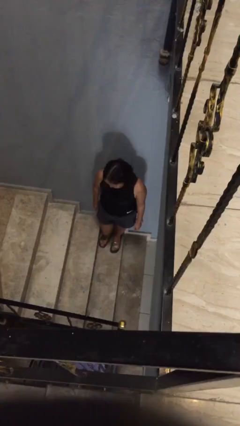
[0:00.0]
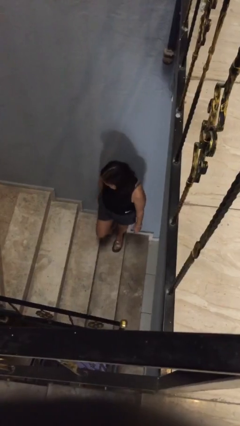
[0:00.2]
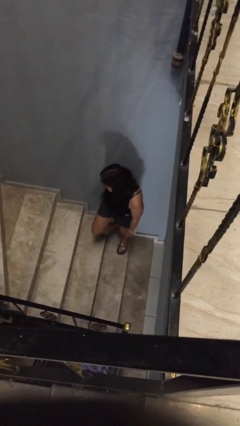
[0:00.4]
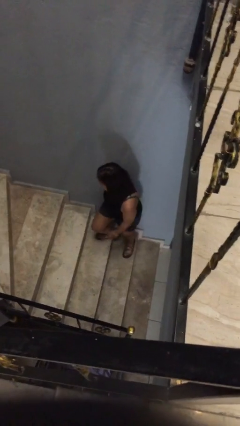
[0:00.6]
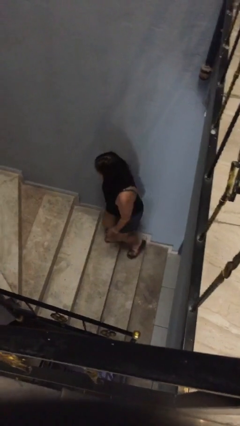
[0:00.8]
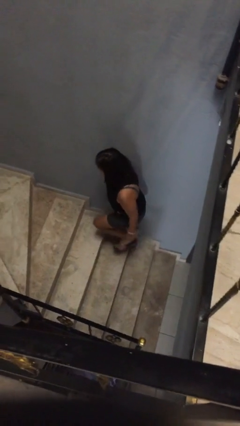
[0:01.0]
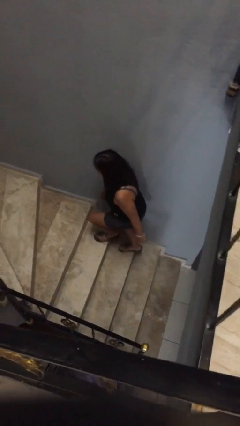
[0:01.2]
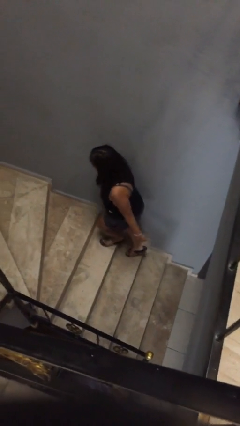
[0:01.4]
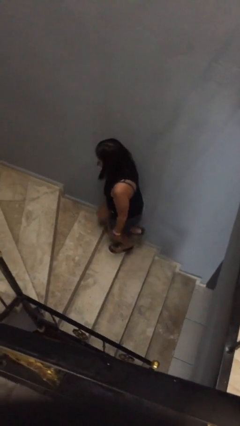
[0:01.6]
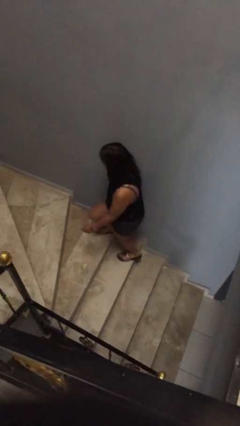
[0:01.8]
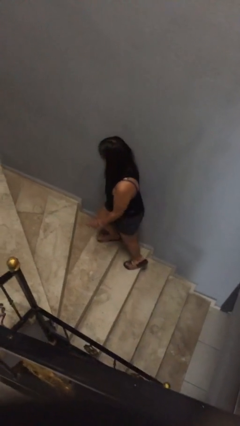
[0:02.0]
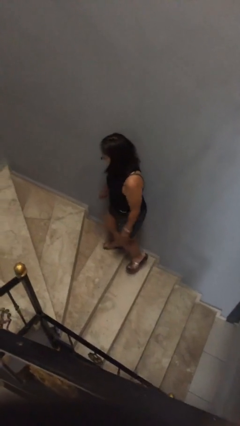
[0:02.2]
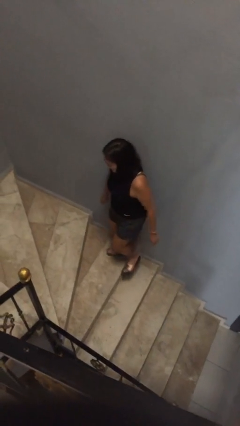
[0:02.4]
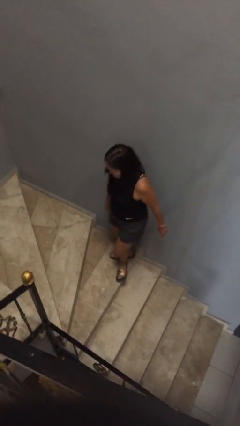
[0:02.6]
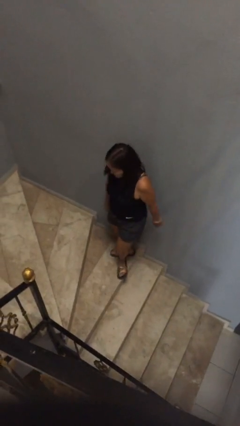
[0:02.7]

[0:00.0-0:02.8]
person climbs up stairs

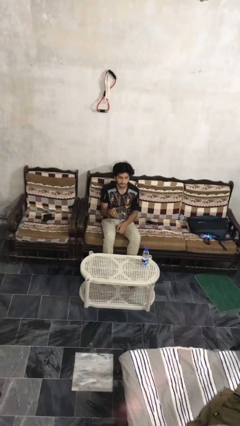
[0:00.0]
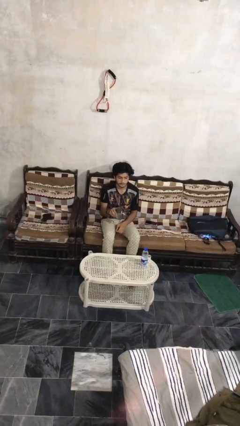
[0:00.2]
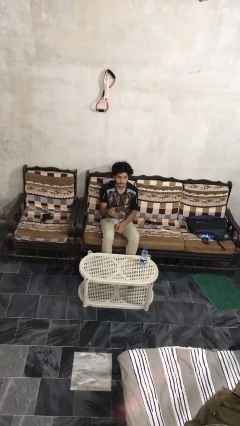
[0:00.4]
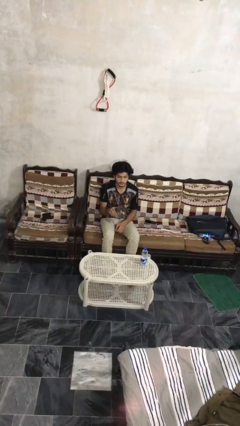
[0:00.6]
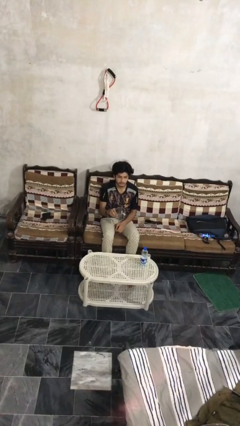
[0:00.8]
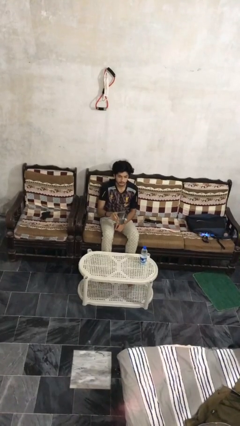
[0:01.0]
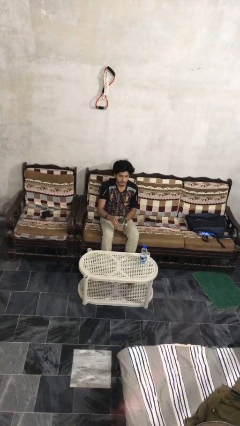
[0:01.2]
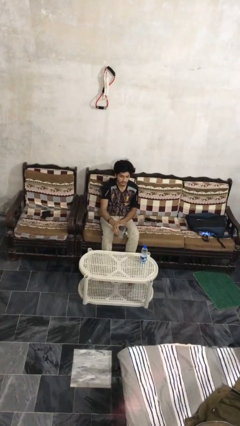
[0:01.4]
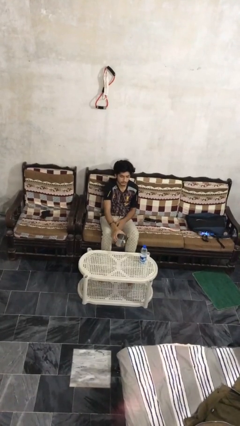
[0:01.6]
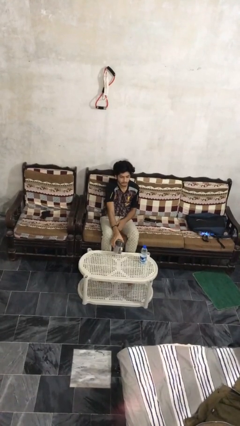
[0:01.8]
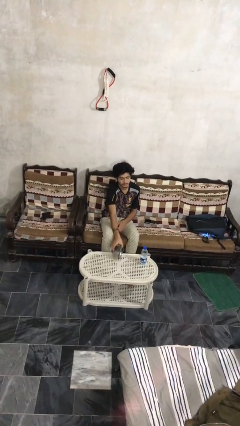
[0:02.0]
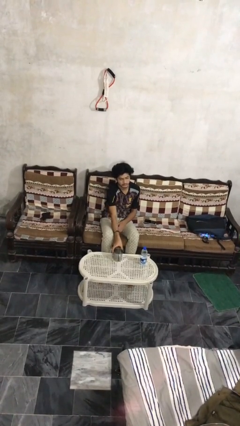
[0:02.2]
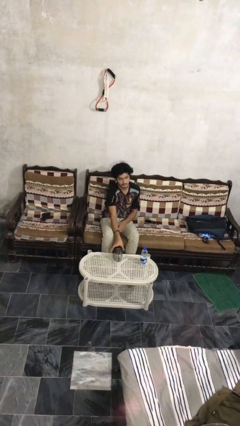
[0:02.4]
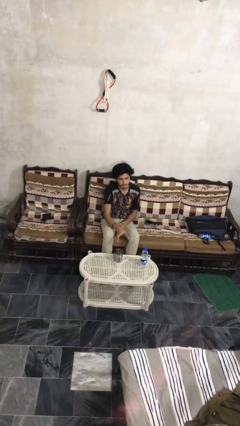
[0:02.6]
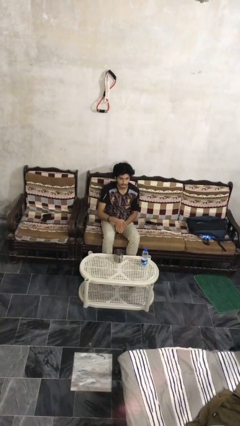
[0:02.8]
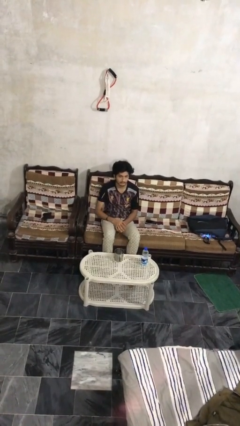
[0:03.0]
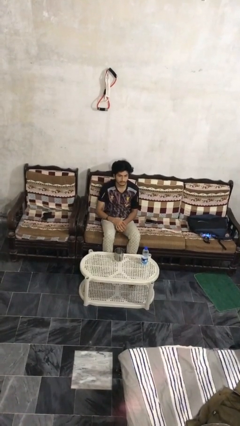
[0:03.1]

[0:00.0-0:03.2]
person puts down object on table

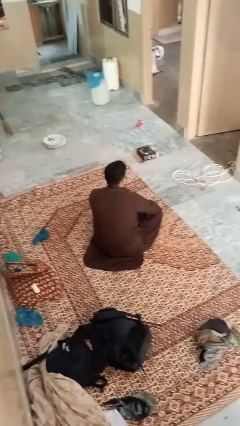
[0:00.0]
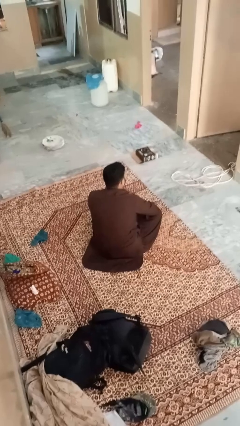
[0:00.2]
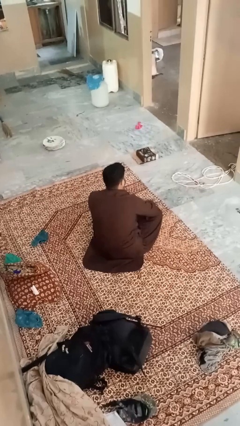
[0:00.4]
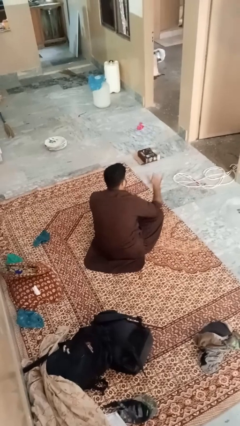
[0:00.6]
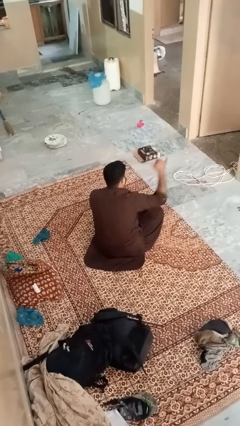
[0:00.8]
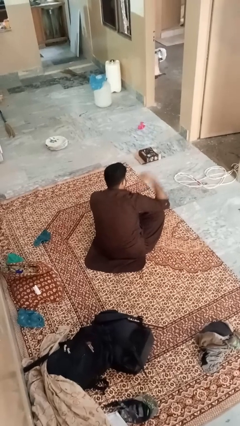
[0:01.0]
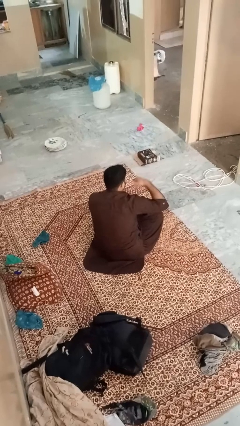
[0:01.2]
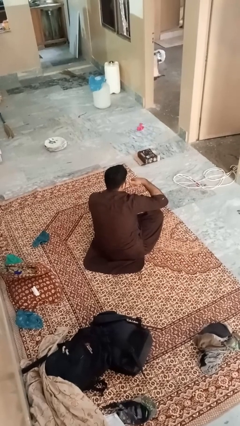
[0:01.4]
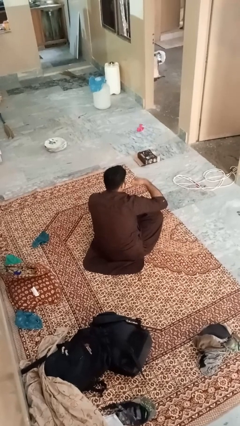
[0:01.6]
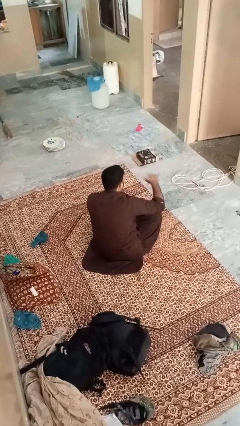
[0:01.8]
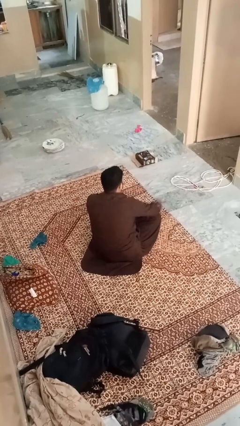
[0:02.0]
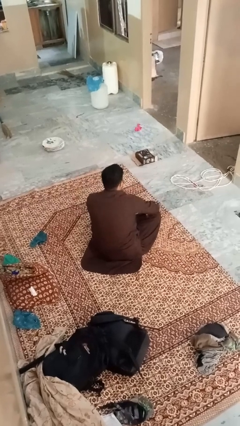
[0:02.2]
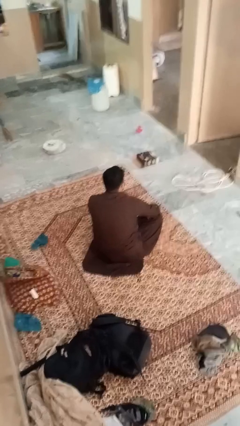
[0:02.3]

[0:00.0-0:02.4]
person gestures call me

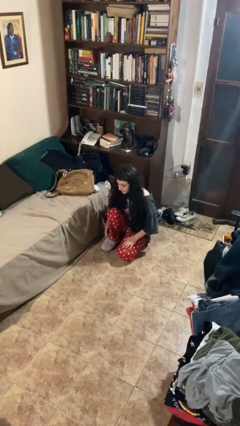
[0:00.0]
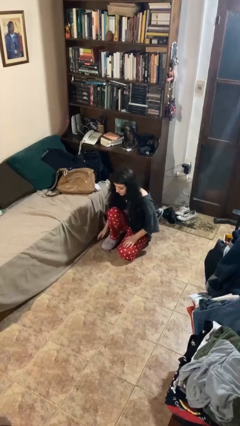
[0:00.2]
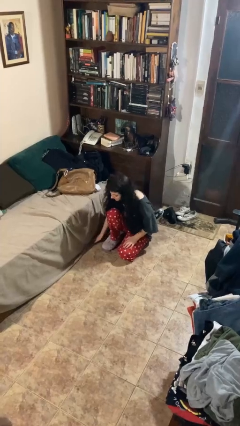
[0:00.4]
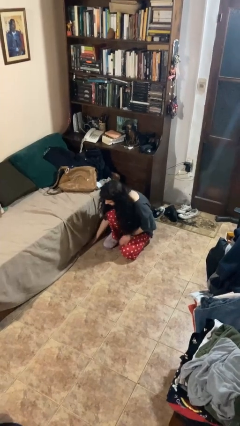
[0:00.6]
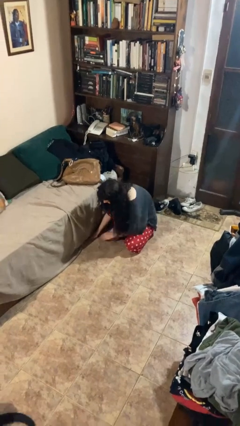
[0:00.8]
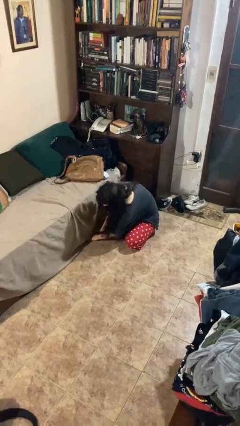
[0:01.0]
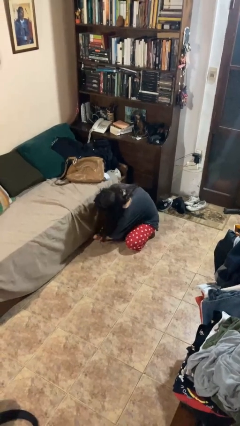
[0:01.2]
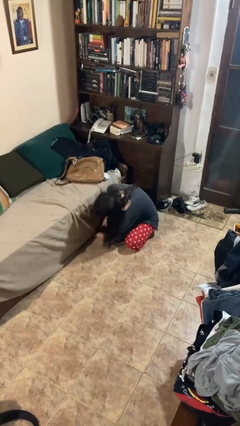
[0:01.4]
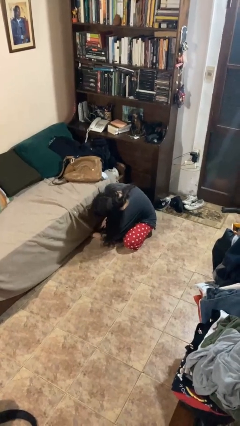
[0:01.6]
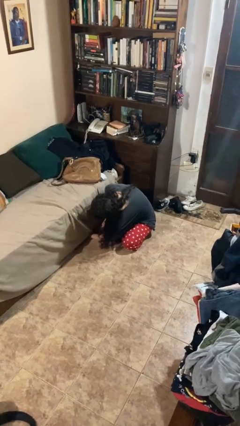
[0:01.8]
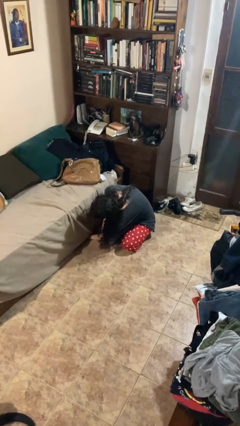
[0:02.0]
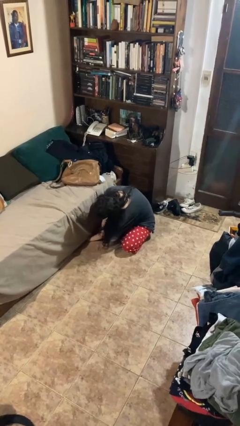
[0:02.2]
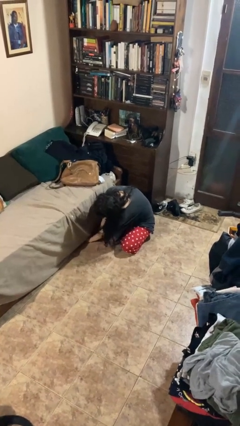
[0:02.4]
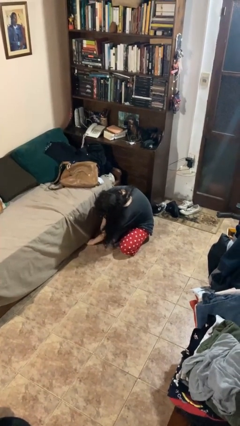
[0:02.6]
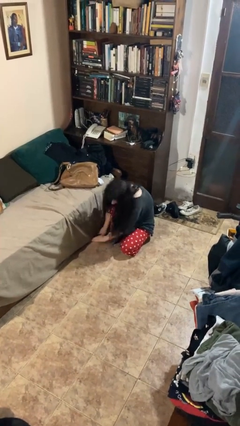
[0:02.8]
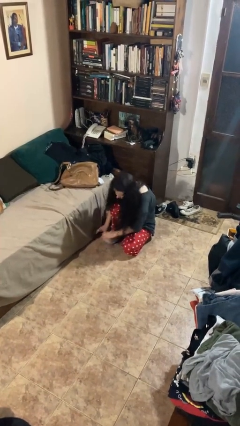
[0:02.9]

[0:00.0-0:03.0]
person searches under couch

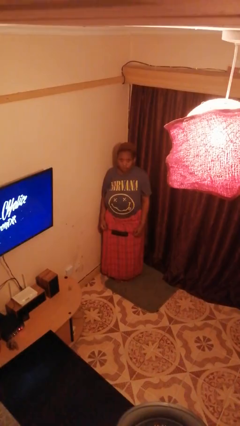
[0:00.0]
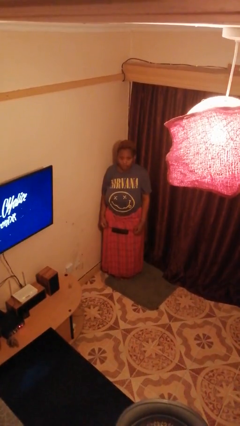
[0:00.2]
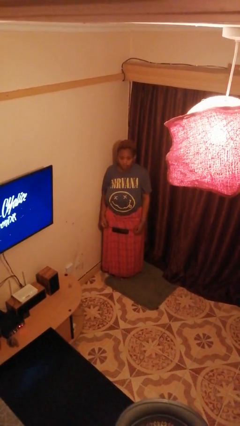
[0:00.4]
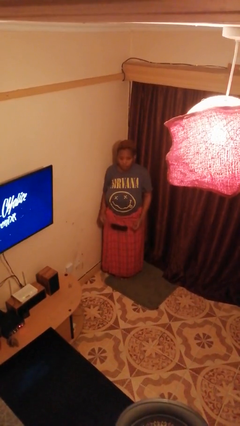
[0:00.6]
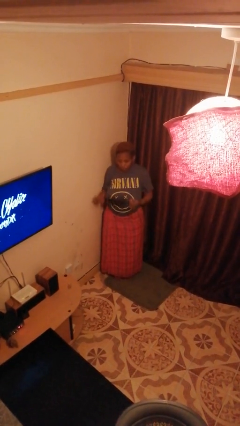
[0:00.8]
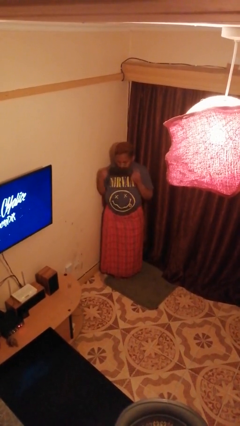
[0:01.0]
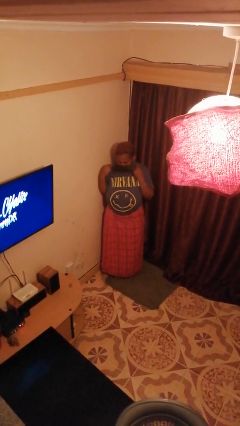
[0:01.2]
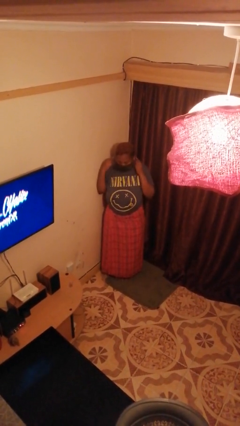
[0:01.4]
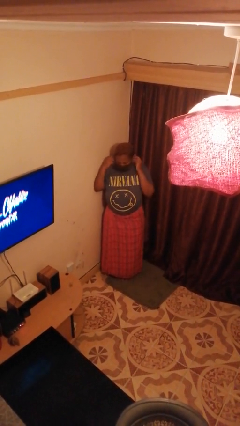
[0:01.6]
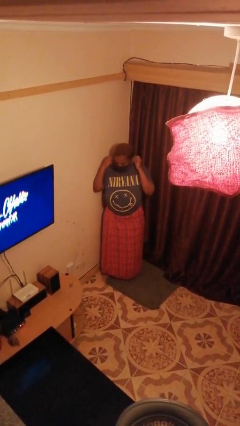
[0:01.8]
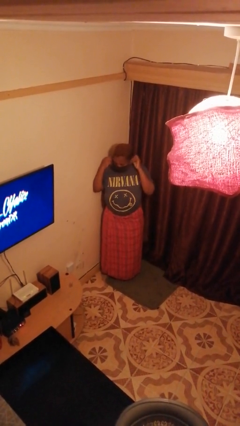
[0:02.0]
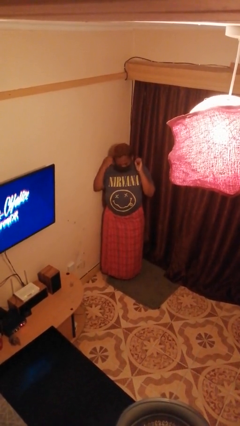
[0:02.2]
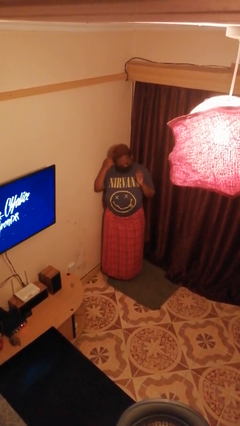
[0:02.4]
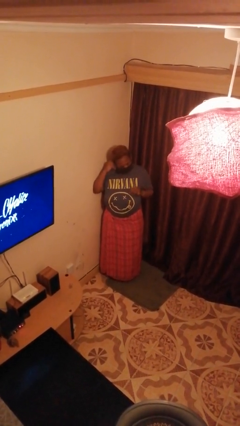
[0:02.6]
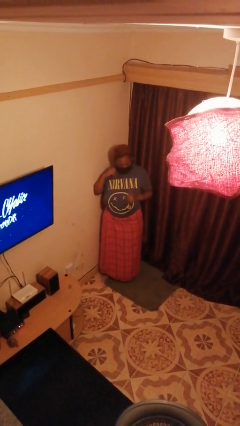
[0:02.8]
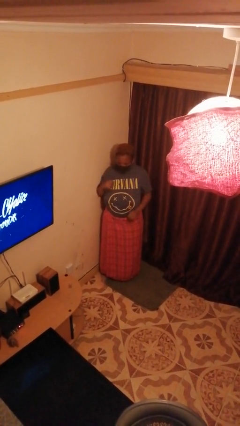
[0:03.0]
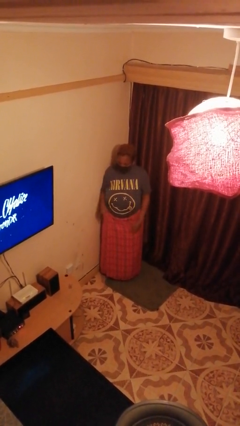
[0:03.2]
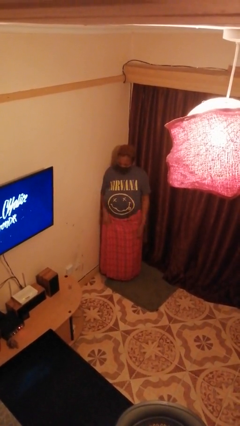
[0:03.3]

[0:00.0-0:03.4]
person puts on facemask

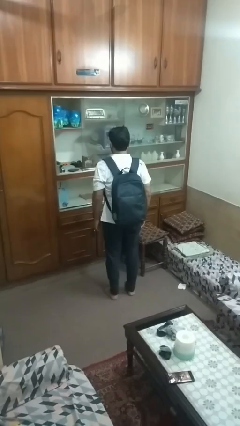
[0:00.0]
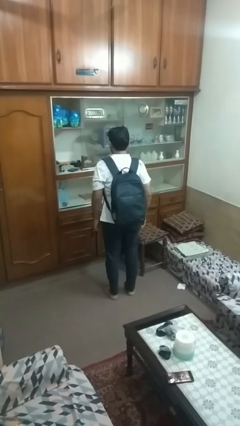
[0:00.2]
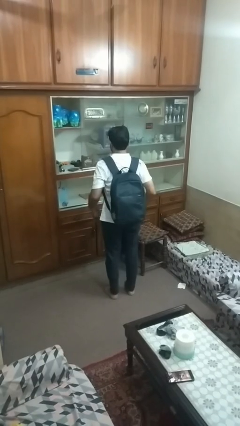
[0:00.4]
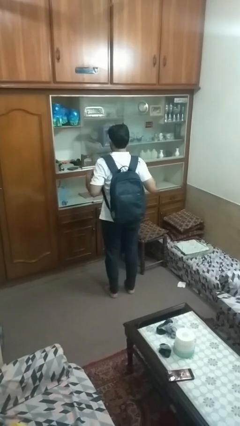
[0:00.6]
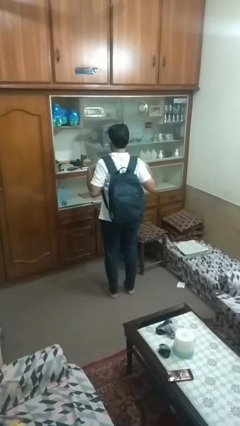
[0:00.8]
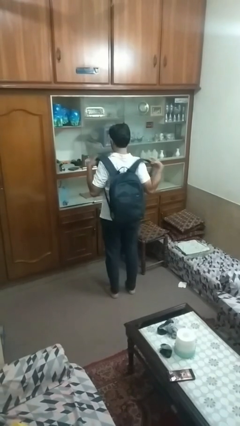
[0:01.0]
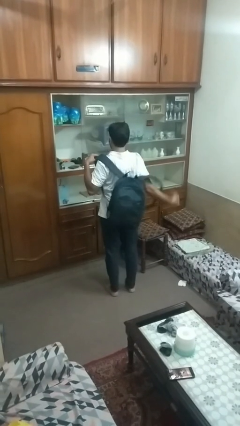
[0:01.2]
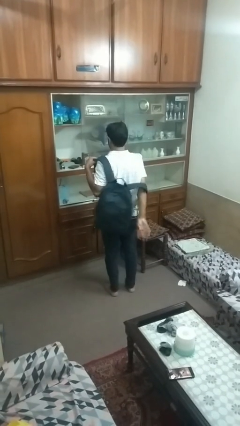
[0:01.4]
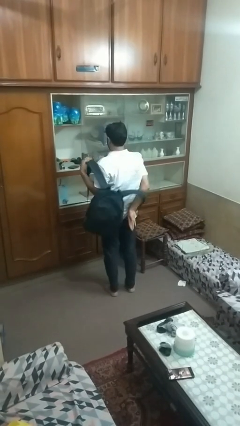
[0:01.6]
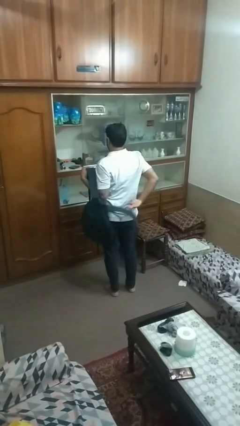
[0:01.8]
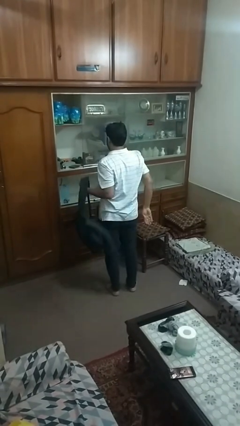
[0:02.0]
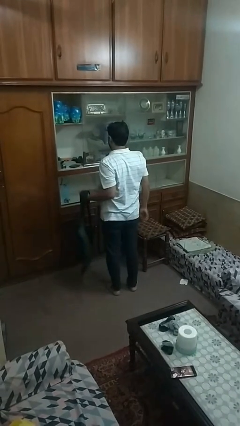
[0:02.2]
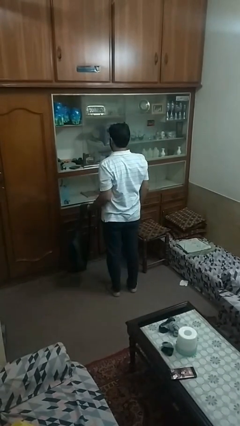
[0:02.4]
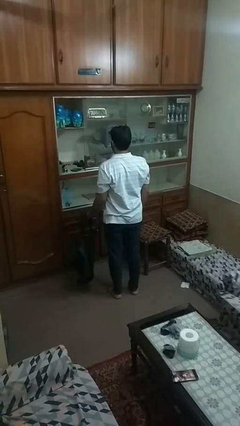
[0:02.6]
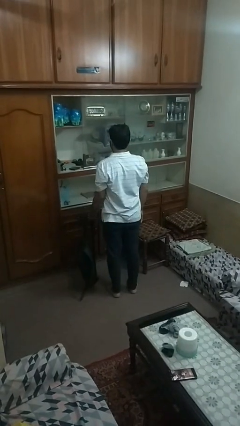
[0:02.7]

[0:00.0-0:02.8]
person takes off backpack
